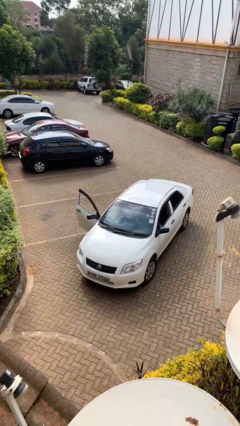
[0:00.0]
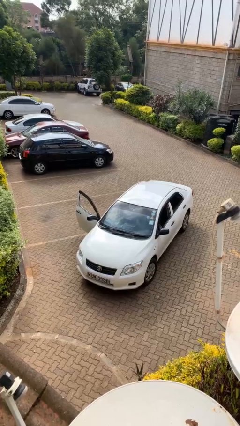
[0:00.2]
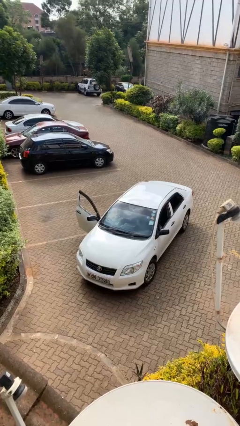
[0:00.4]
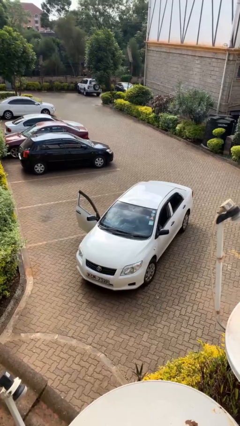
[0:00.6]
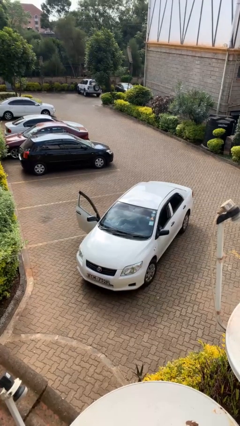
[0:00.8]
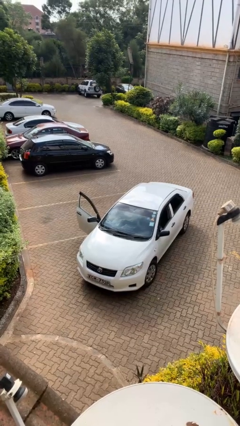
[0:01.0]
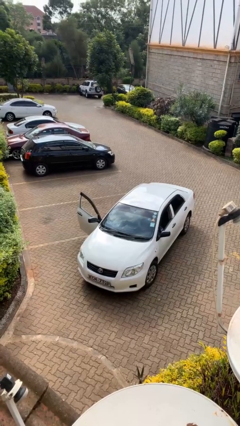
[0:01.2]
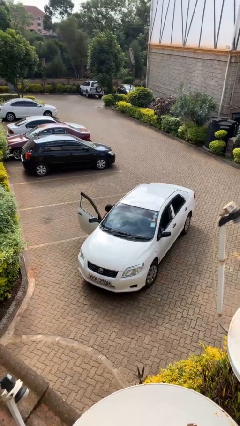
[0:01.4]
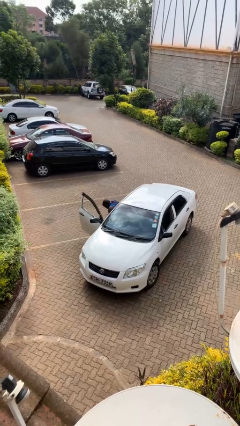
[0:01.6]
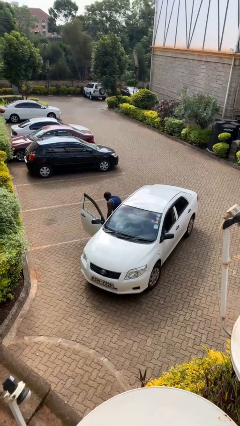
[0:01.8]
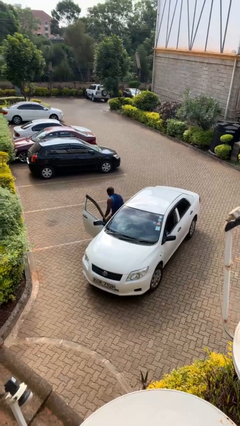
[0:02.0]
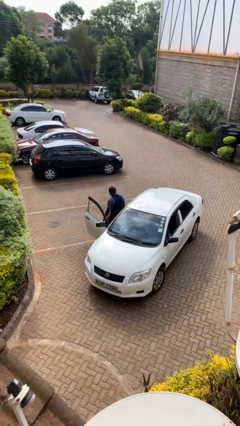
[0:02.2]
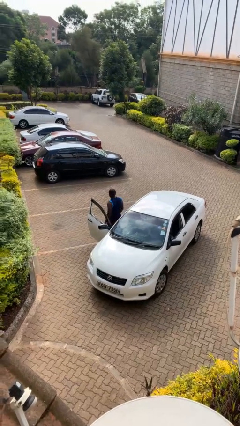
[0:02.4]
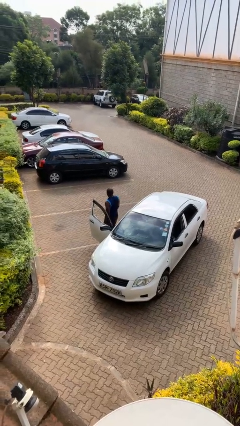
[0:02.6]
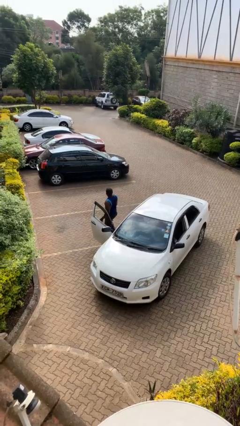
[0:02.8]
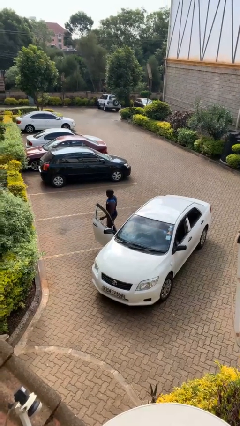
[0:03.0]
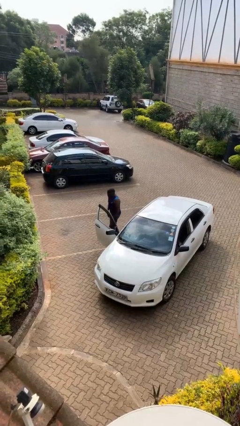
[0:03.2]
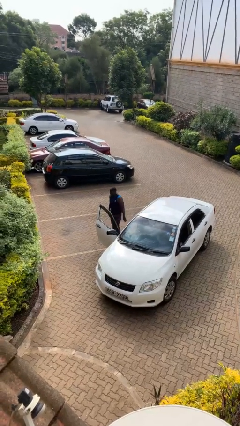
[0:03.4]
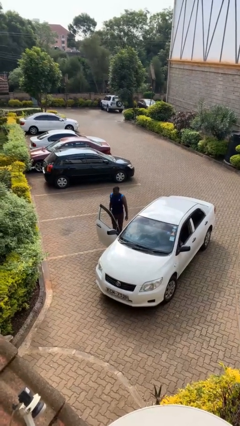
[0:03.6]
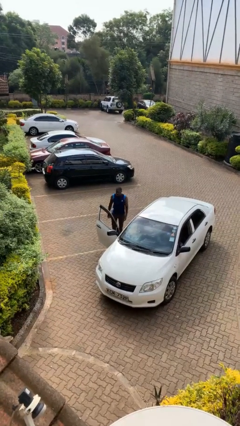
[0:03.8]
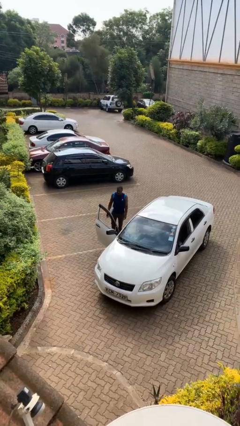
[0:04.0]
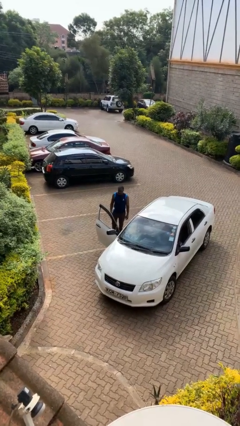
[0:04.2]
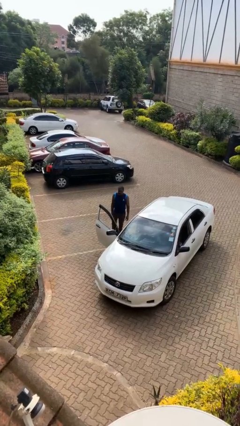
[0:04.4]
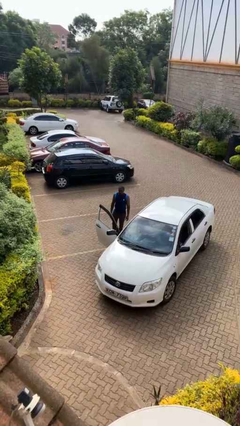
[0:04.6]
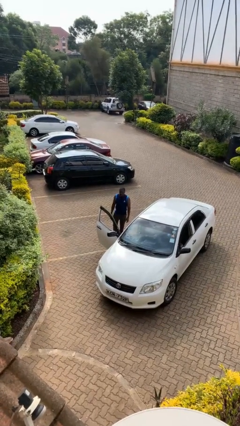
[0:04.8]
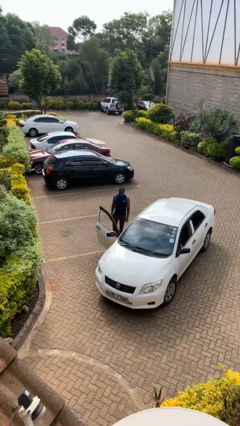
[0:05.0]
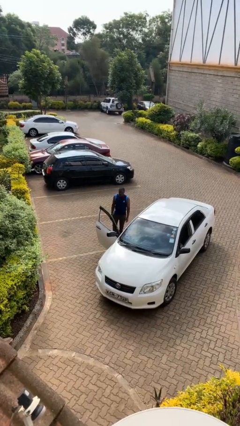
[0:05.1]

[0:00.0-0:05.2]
person exits car

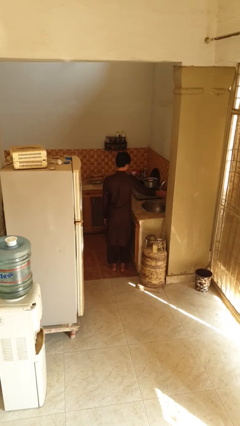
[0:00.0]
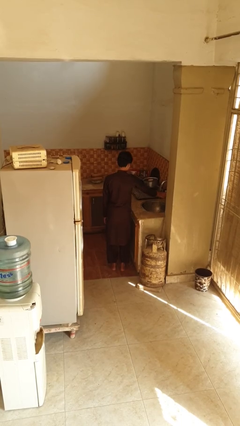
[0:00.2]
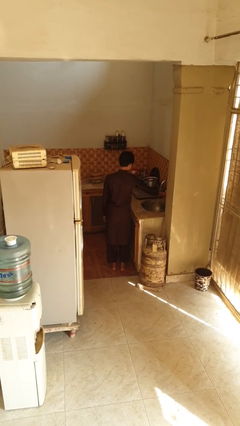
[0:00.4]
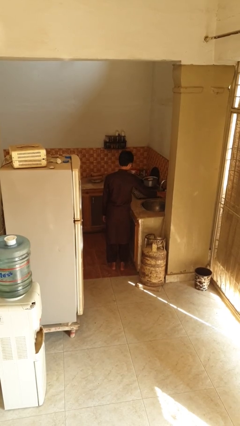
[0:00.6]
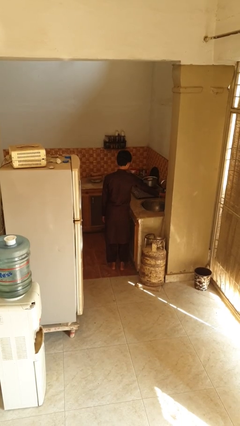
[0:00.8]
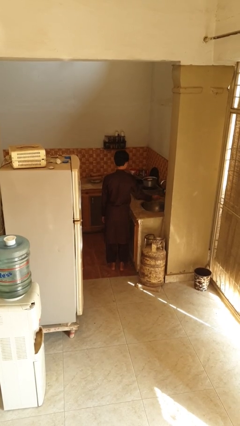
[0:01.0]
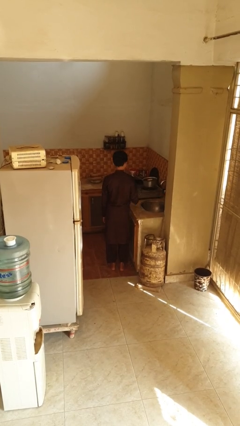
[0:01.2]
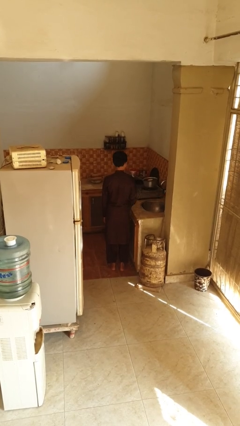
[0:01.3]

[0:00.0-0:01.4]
person turns off faucet

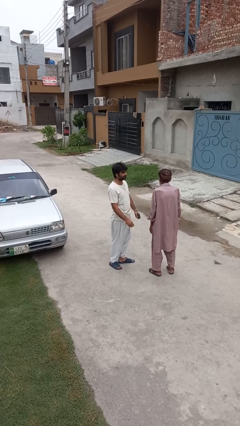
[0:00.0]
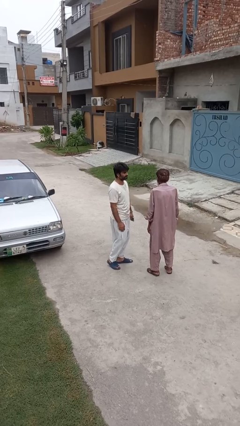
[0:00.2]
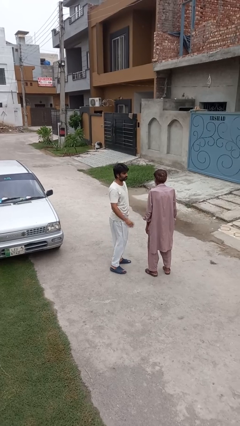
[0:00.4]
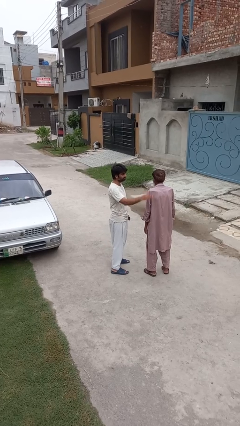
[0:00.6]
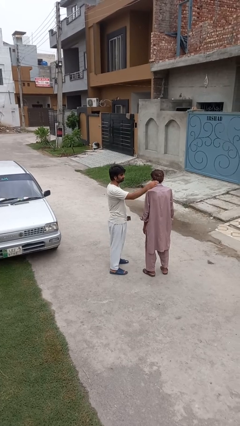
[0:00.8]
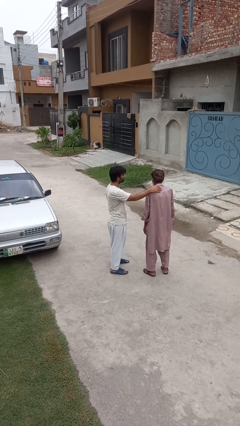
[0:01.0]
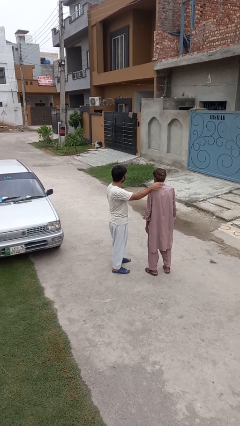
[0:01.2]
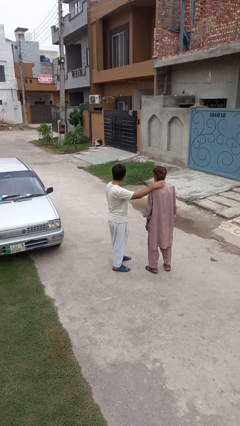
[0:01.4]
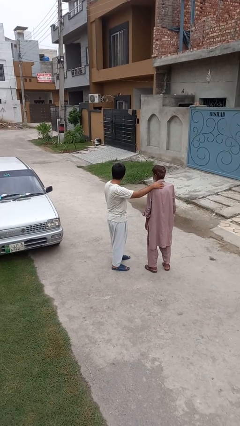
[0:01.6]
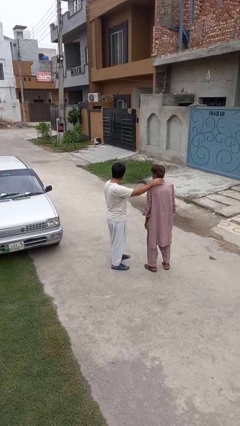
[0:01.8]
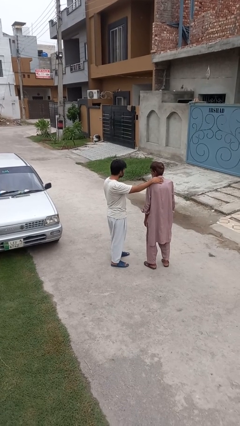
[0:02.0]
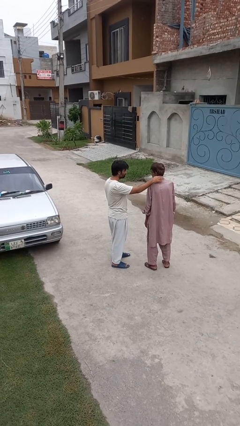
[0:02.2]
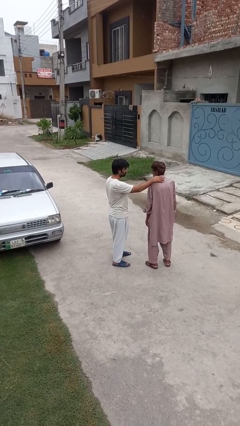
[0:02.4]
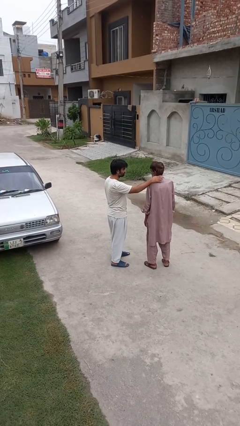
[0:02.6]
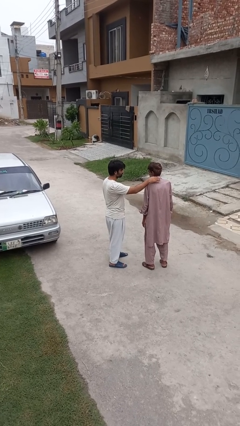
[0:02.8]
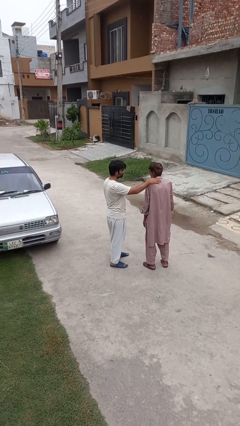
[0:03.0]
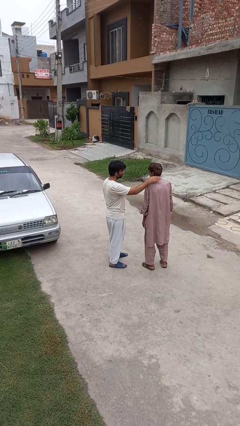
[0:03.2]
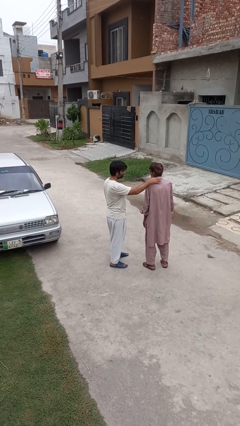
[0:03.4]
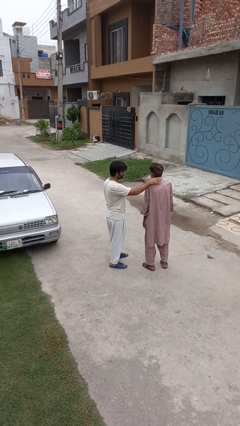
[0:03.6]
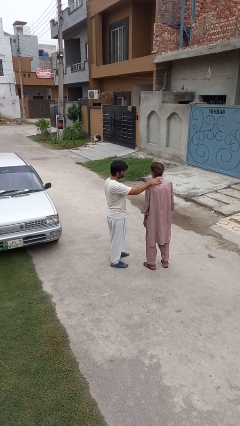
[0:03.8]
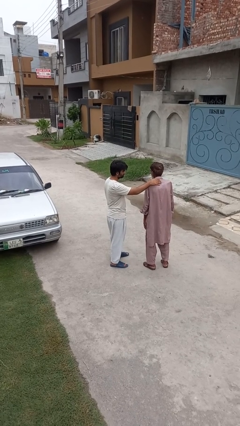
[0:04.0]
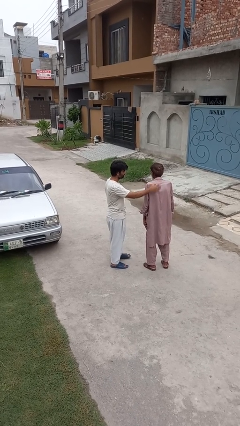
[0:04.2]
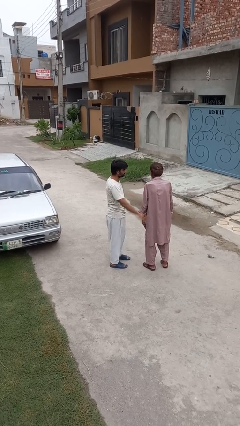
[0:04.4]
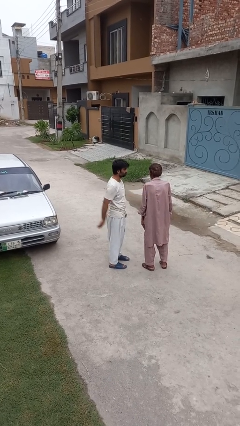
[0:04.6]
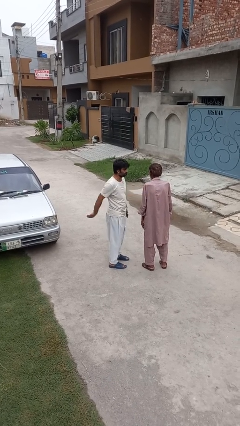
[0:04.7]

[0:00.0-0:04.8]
person pounds shoulders of person

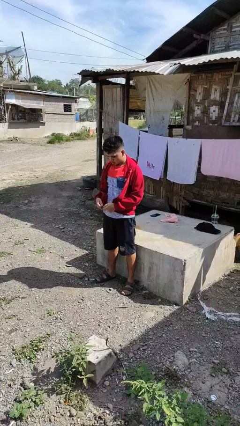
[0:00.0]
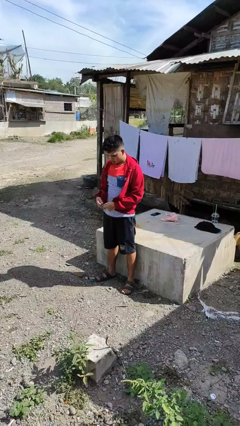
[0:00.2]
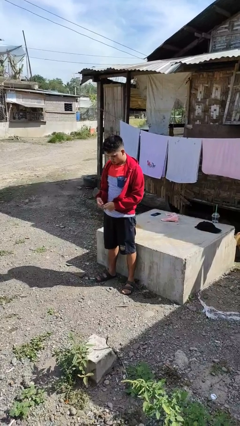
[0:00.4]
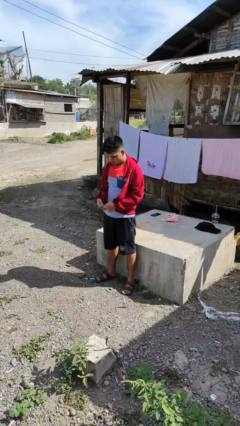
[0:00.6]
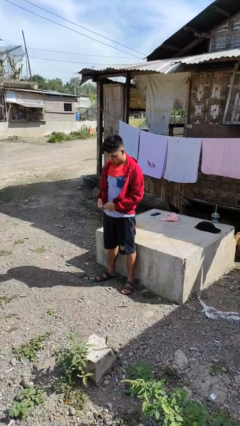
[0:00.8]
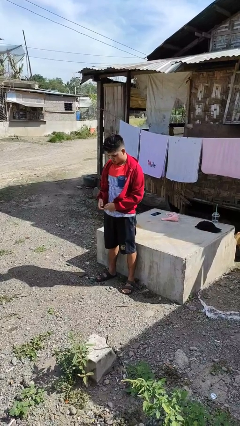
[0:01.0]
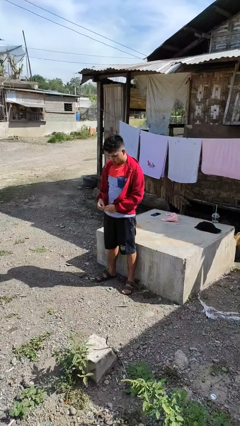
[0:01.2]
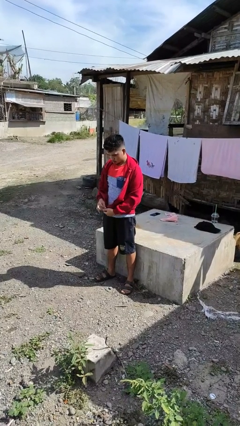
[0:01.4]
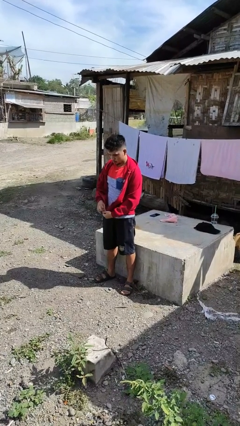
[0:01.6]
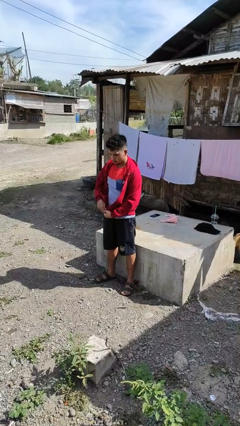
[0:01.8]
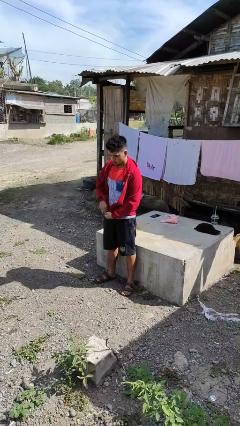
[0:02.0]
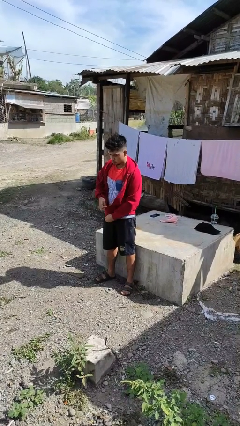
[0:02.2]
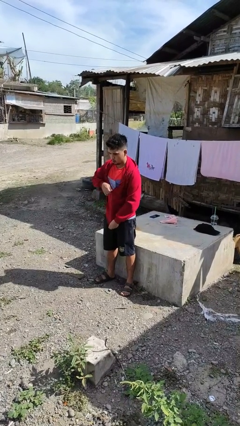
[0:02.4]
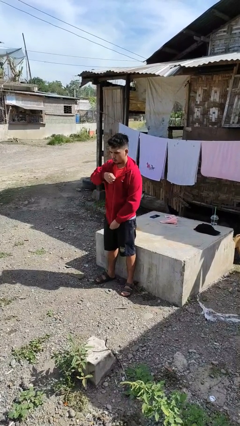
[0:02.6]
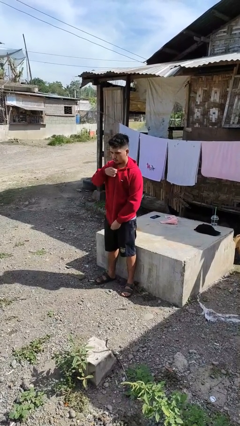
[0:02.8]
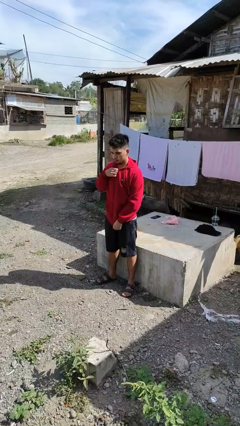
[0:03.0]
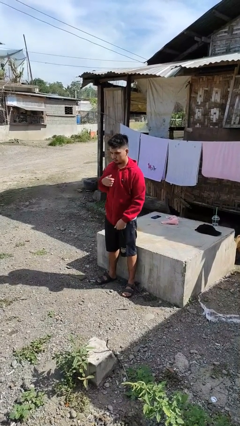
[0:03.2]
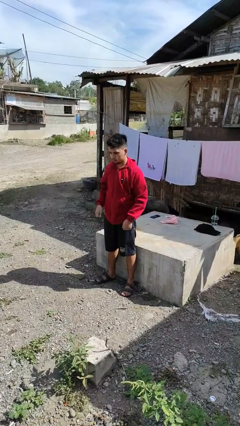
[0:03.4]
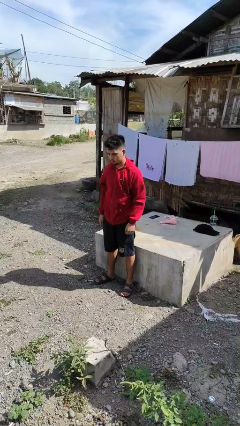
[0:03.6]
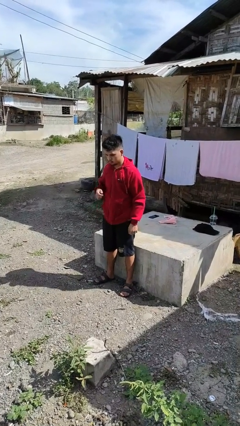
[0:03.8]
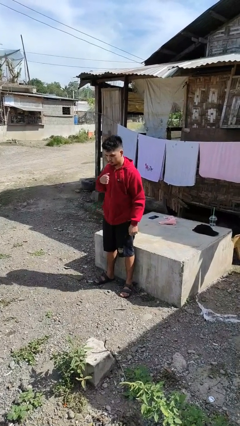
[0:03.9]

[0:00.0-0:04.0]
person zips up jacket

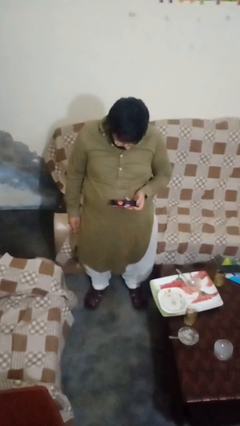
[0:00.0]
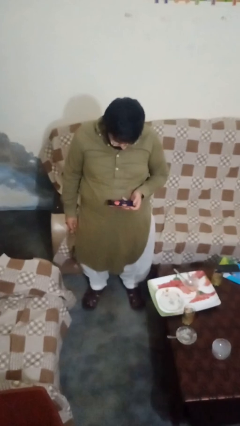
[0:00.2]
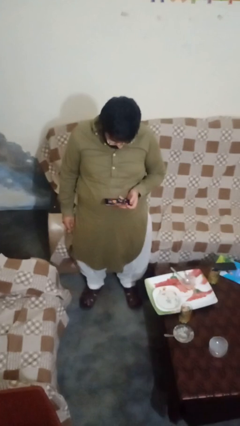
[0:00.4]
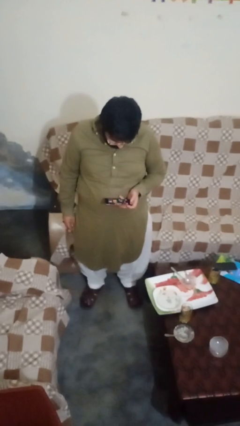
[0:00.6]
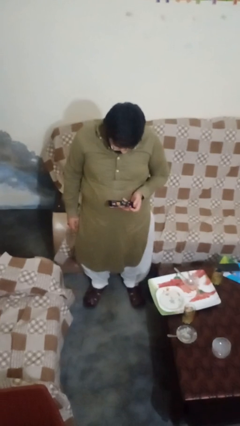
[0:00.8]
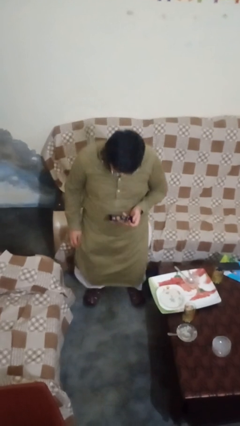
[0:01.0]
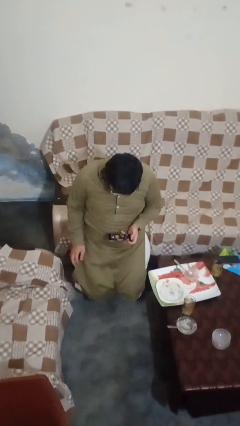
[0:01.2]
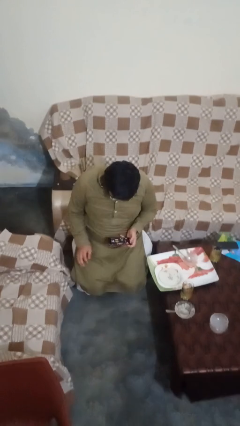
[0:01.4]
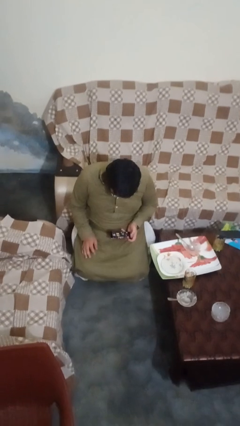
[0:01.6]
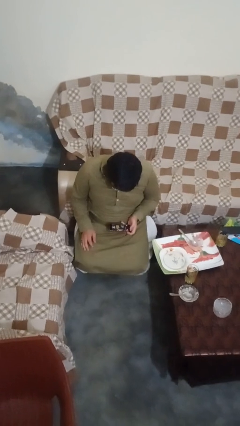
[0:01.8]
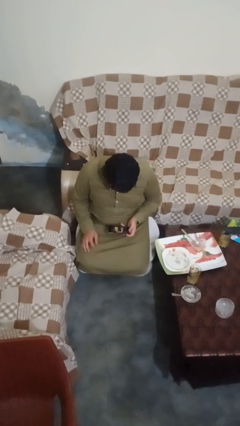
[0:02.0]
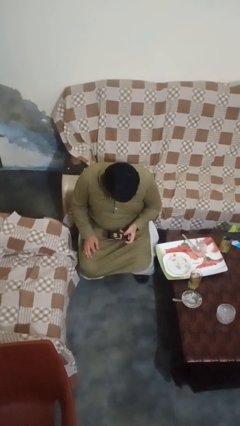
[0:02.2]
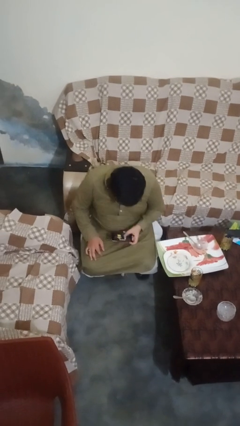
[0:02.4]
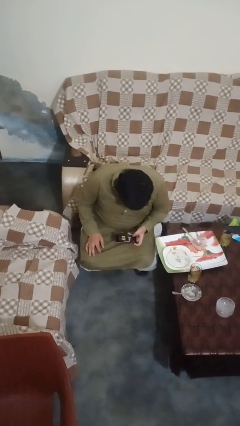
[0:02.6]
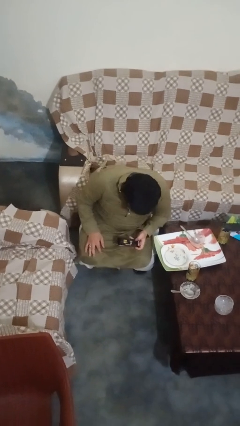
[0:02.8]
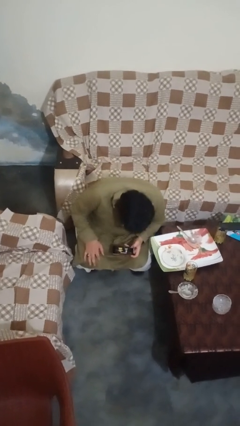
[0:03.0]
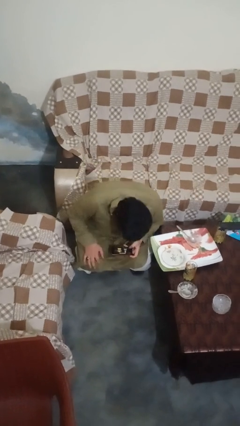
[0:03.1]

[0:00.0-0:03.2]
person squats
